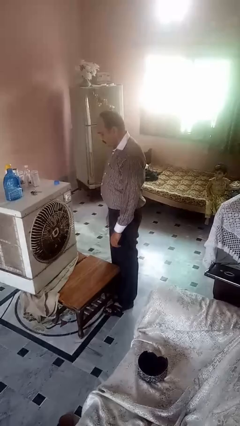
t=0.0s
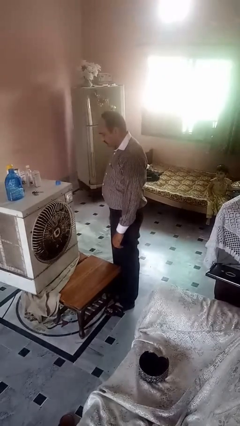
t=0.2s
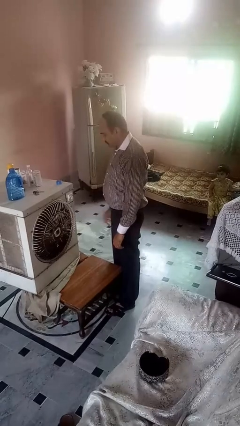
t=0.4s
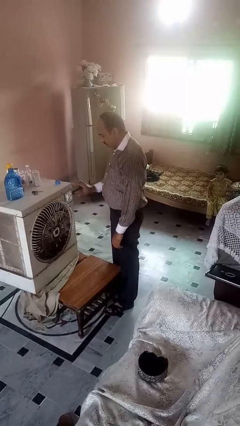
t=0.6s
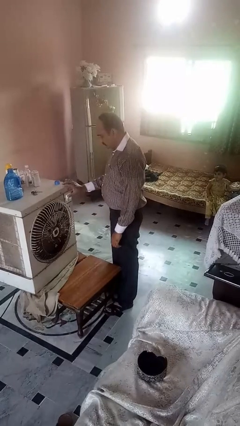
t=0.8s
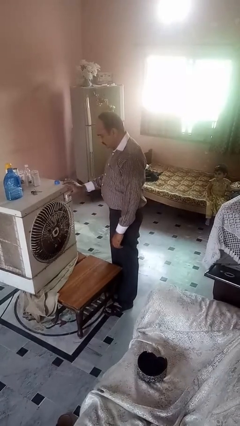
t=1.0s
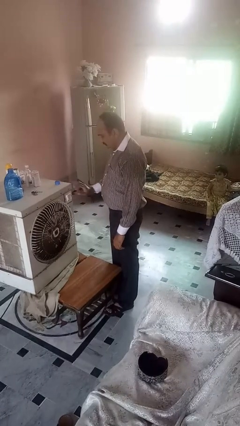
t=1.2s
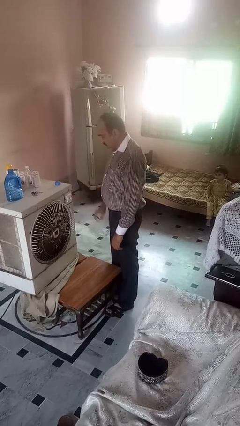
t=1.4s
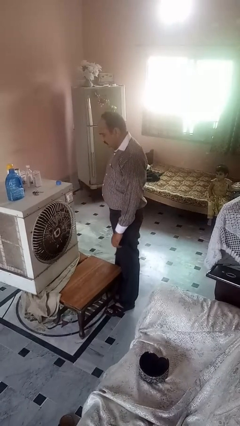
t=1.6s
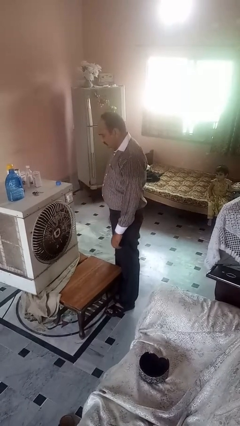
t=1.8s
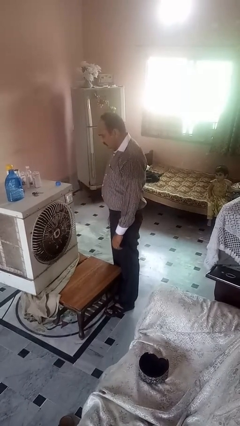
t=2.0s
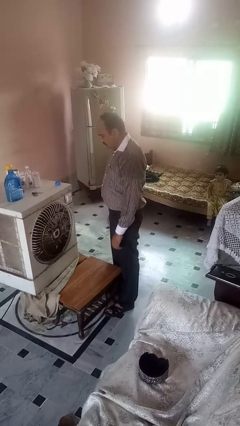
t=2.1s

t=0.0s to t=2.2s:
person turns off fan

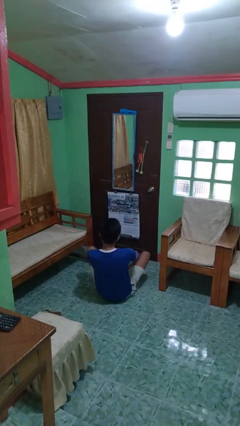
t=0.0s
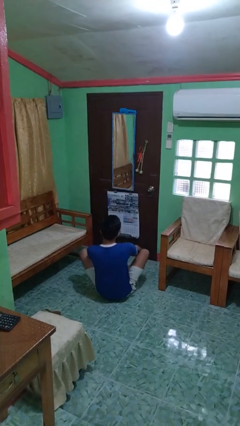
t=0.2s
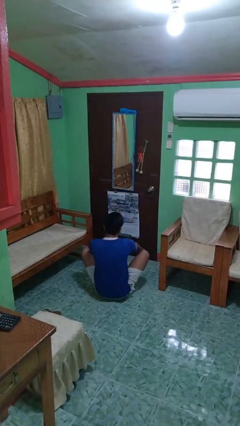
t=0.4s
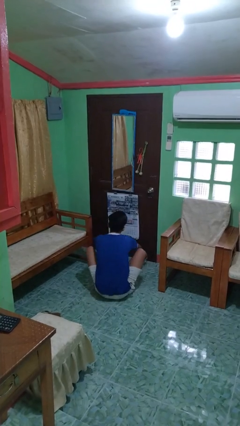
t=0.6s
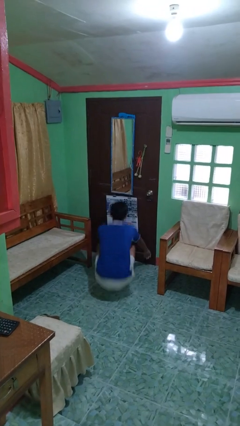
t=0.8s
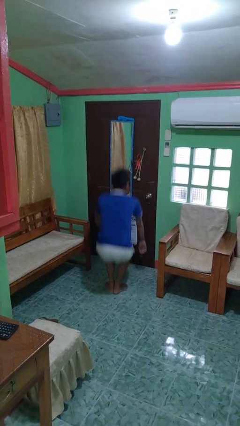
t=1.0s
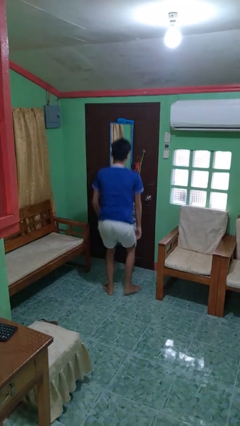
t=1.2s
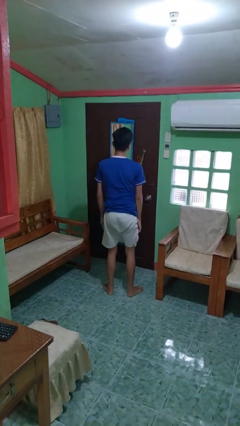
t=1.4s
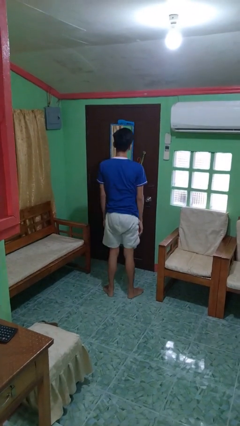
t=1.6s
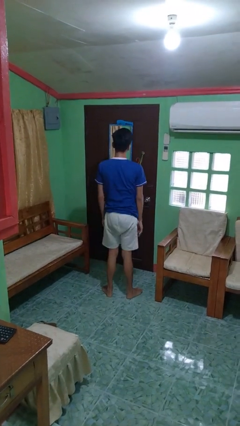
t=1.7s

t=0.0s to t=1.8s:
person stands up from floor

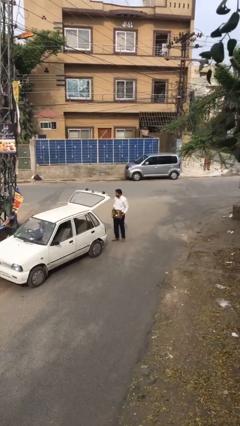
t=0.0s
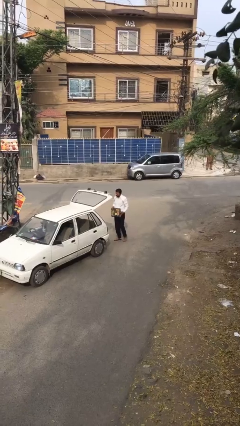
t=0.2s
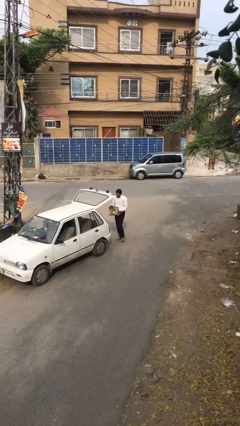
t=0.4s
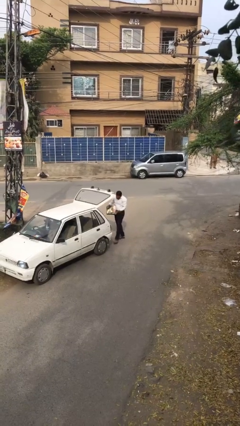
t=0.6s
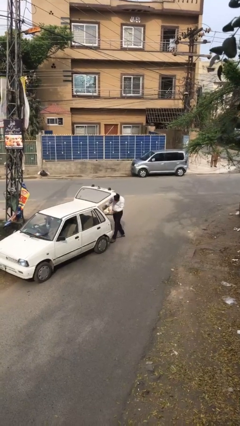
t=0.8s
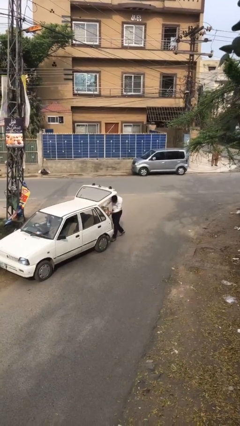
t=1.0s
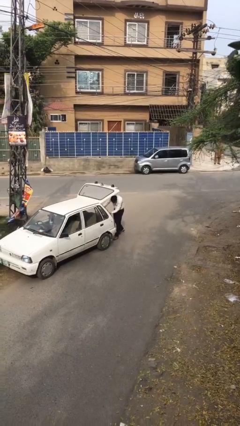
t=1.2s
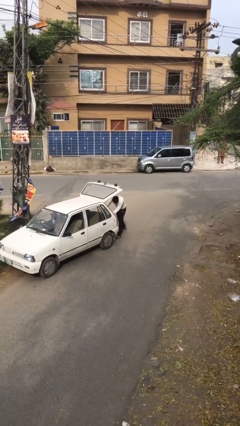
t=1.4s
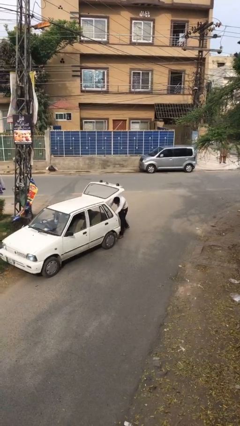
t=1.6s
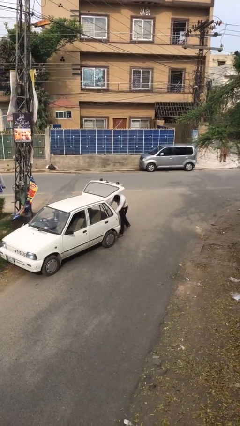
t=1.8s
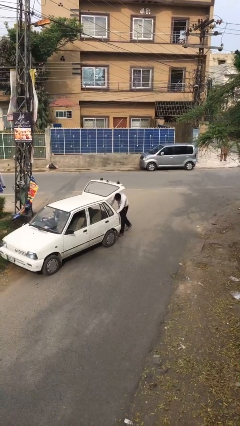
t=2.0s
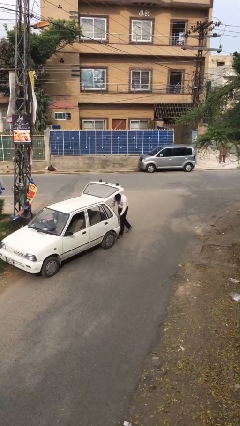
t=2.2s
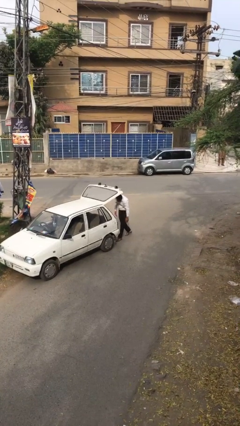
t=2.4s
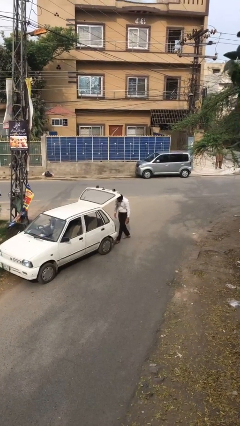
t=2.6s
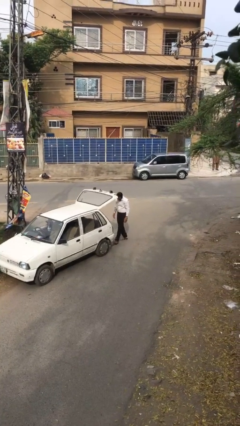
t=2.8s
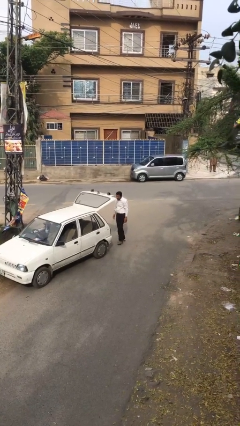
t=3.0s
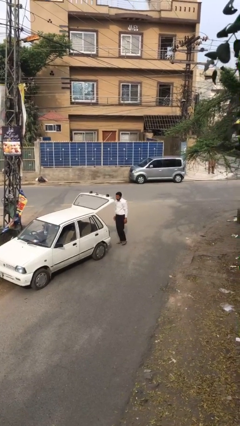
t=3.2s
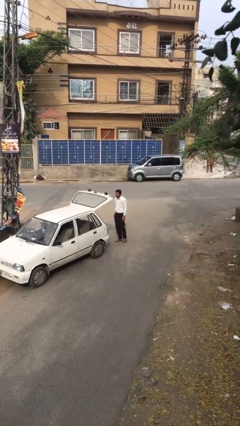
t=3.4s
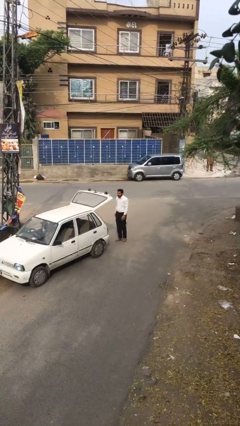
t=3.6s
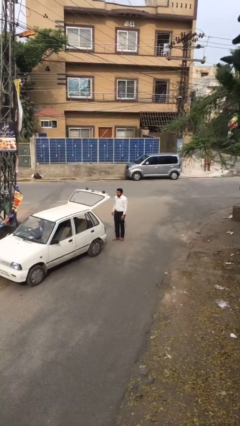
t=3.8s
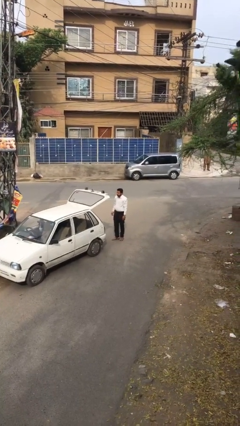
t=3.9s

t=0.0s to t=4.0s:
person loads car

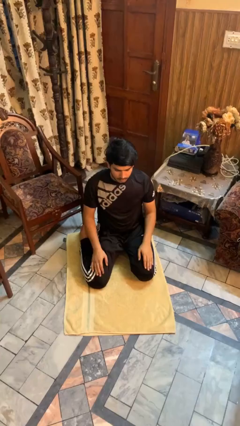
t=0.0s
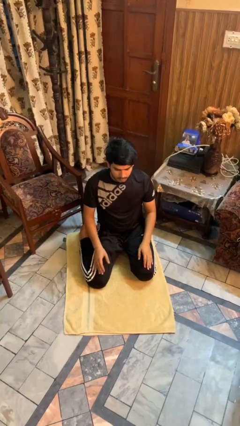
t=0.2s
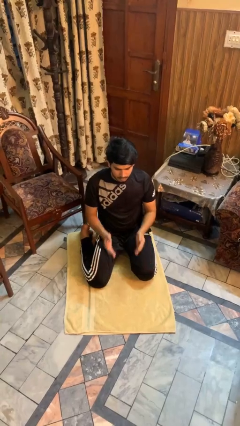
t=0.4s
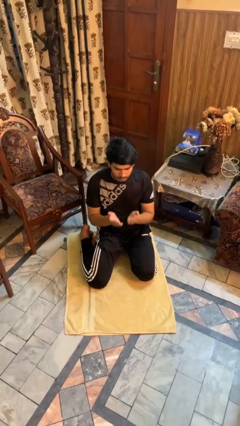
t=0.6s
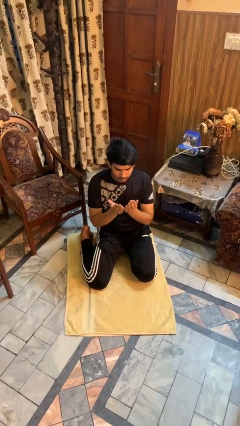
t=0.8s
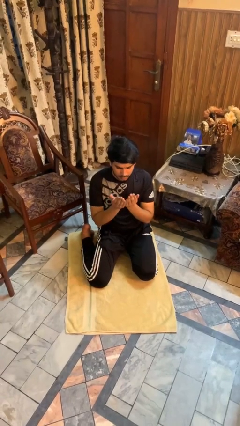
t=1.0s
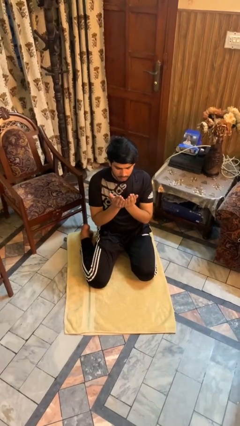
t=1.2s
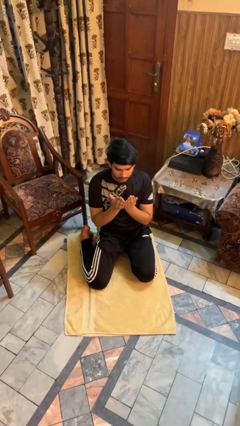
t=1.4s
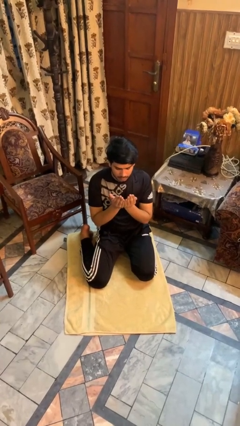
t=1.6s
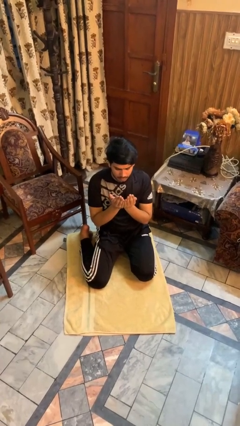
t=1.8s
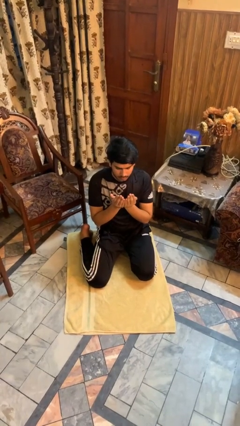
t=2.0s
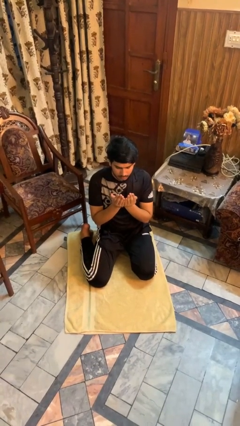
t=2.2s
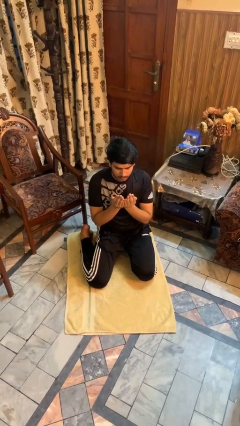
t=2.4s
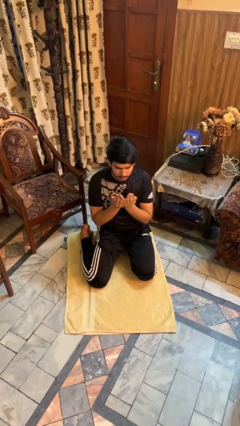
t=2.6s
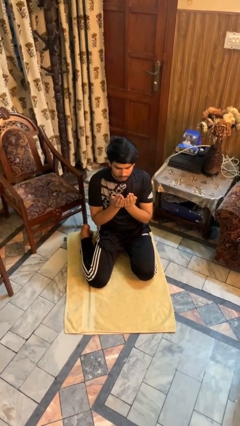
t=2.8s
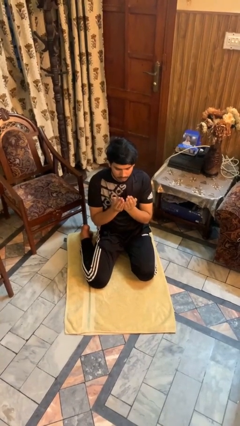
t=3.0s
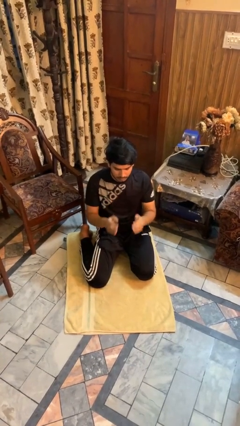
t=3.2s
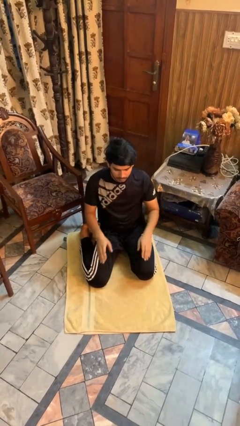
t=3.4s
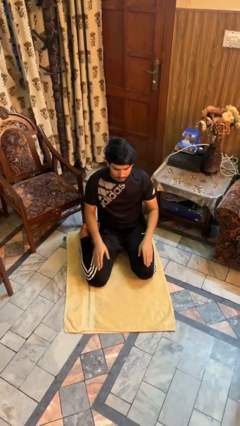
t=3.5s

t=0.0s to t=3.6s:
person prays

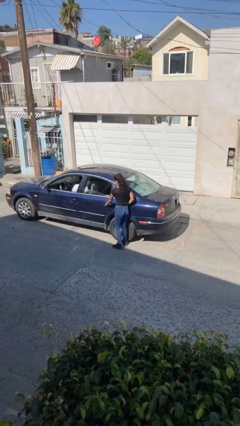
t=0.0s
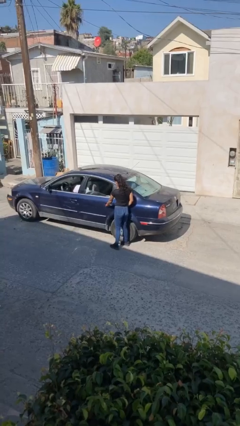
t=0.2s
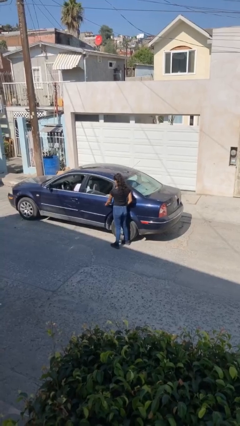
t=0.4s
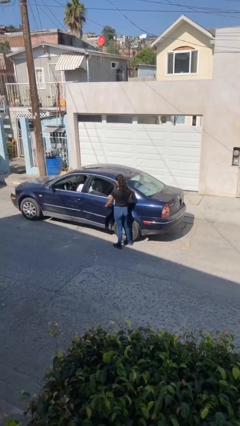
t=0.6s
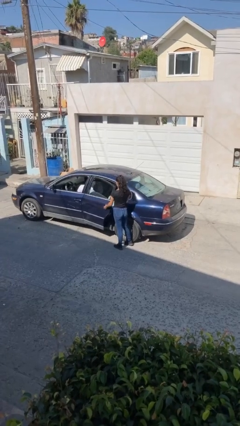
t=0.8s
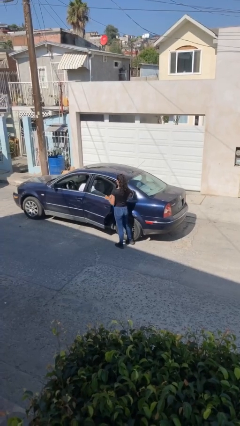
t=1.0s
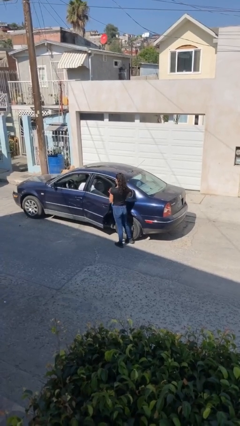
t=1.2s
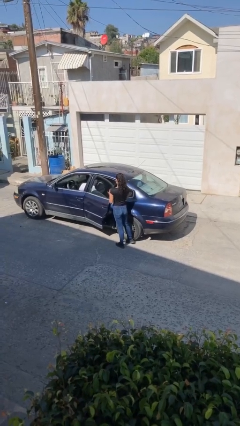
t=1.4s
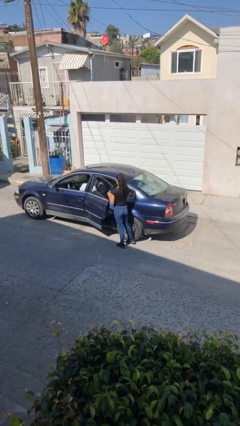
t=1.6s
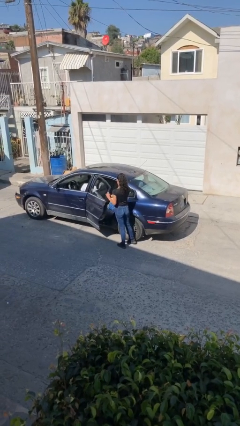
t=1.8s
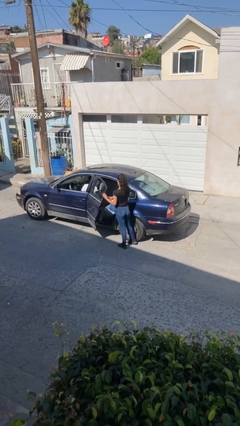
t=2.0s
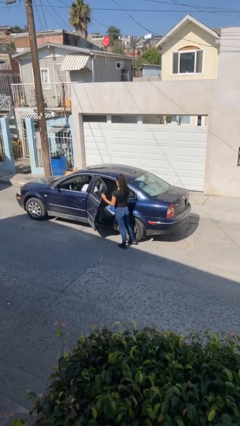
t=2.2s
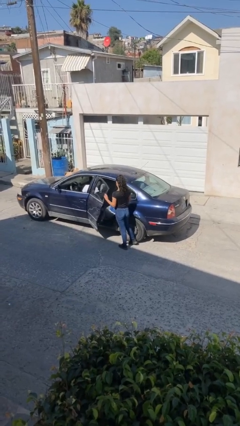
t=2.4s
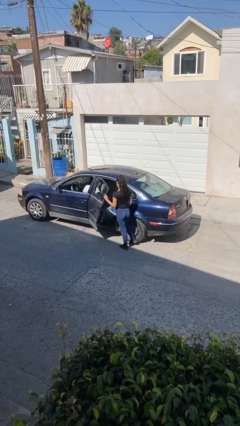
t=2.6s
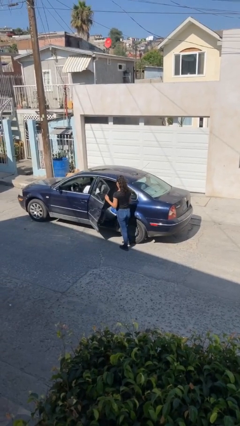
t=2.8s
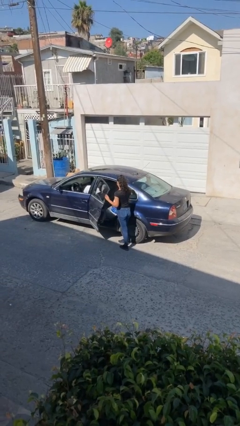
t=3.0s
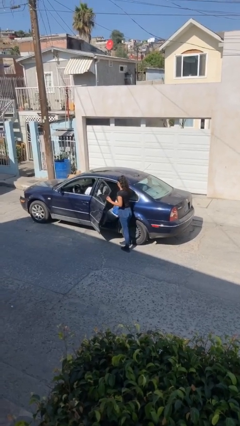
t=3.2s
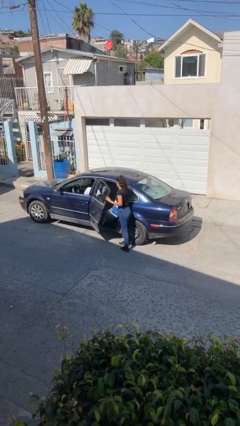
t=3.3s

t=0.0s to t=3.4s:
person opens car door

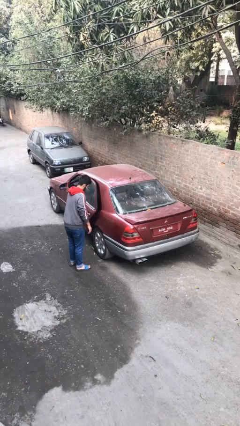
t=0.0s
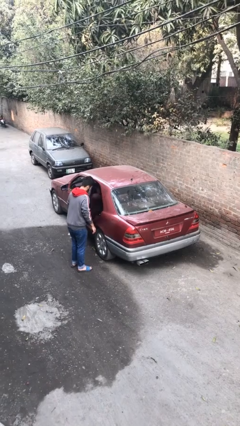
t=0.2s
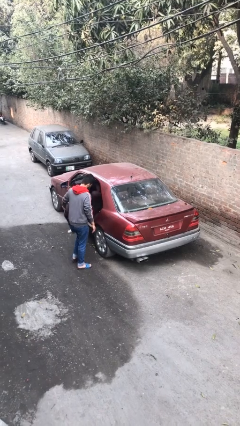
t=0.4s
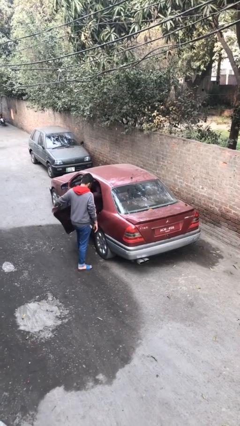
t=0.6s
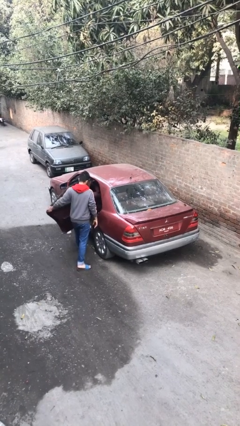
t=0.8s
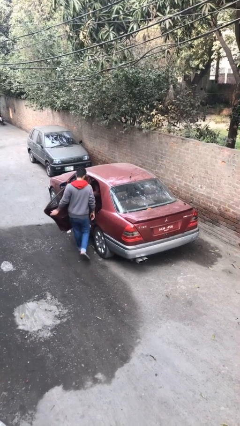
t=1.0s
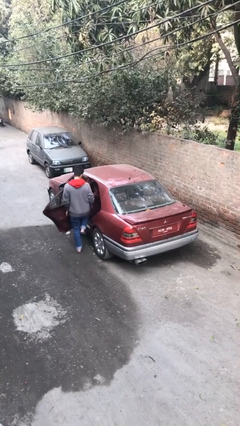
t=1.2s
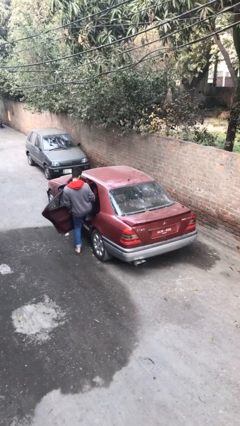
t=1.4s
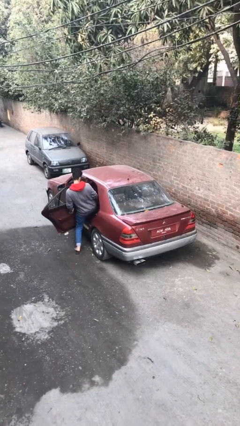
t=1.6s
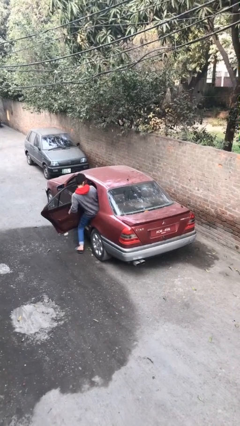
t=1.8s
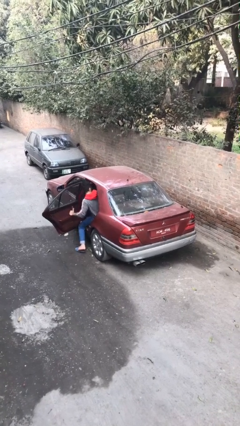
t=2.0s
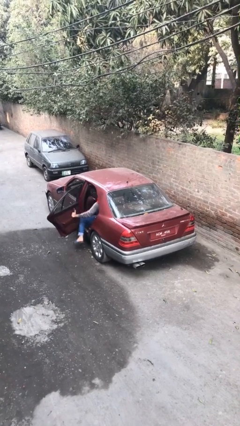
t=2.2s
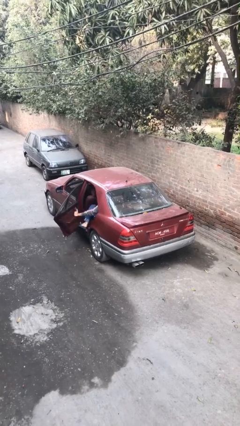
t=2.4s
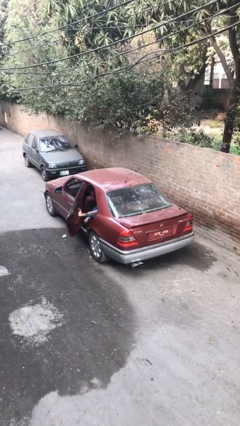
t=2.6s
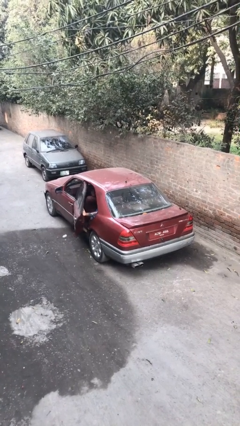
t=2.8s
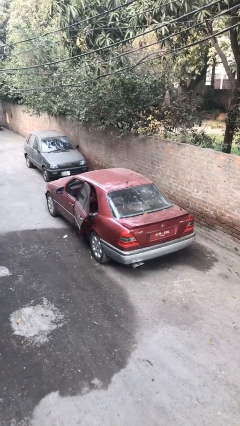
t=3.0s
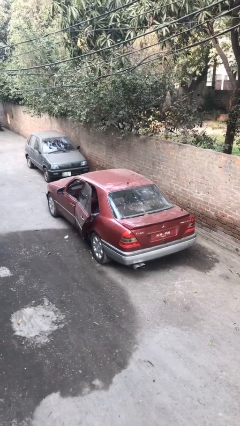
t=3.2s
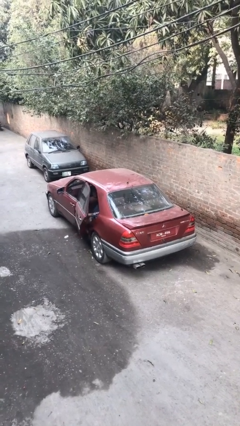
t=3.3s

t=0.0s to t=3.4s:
car picks up person
